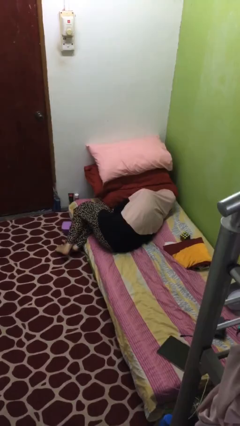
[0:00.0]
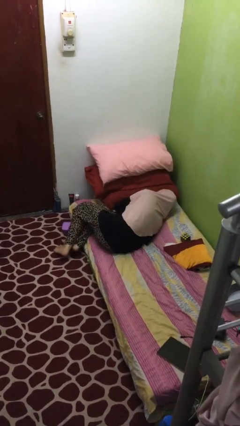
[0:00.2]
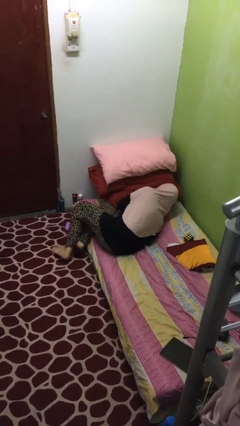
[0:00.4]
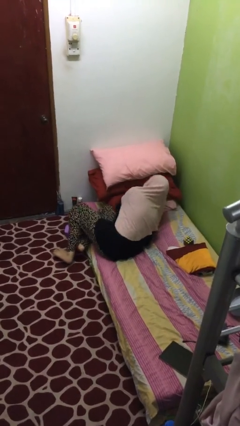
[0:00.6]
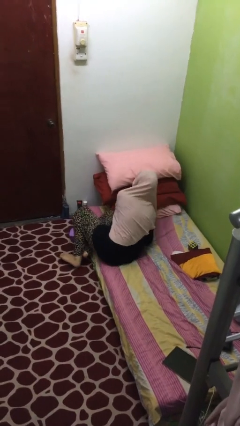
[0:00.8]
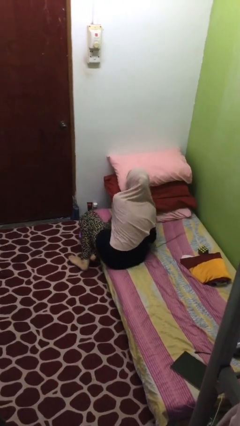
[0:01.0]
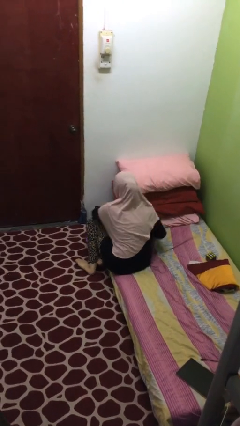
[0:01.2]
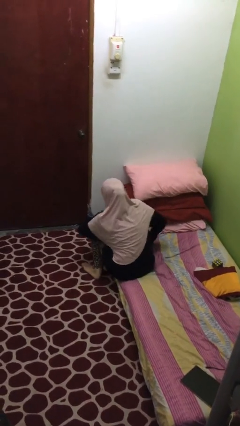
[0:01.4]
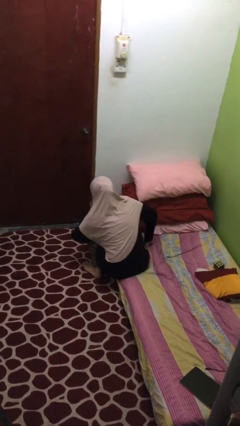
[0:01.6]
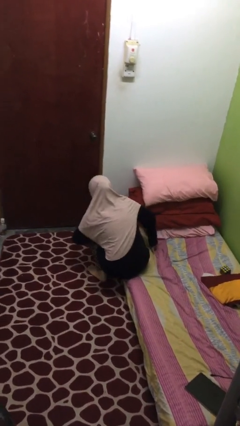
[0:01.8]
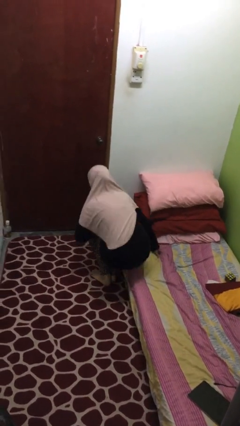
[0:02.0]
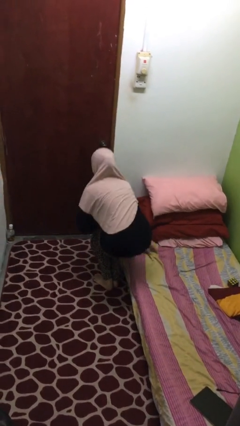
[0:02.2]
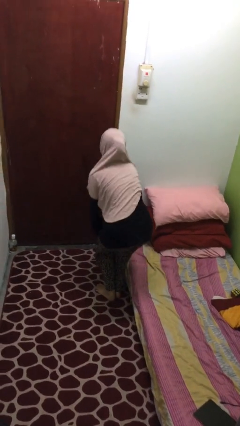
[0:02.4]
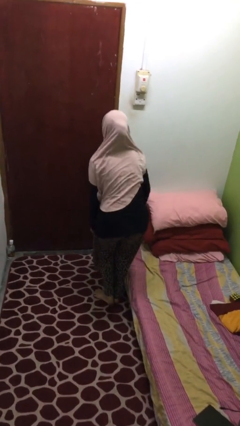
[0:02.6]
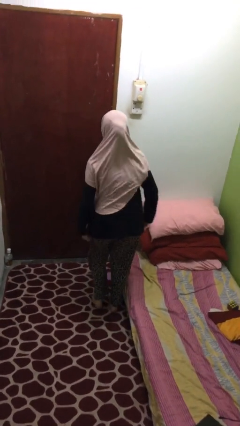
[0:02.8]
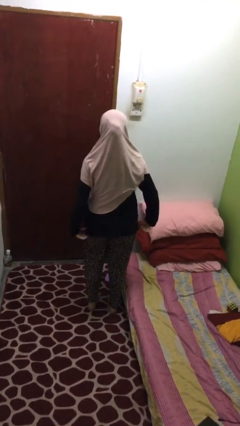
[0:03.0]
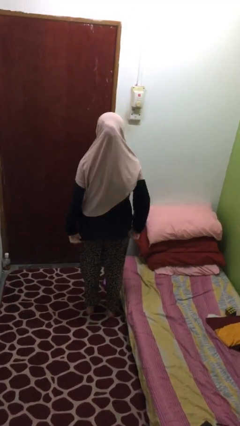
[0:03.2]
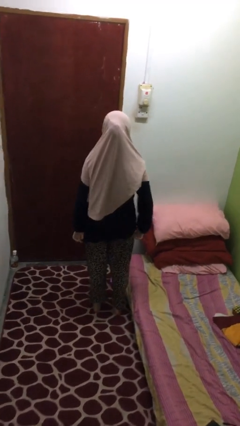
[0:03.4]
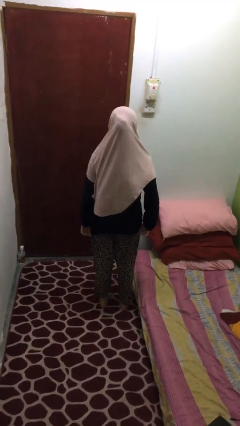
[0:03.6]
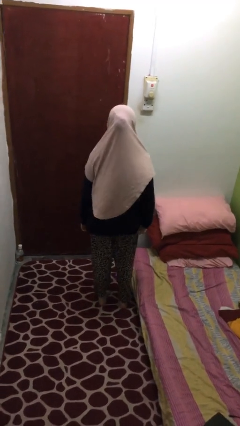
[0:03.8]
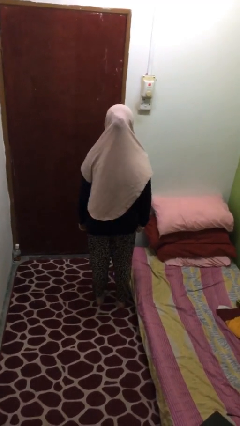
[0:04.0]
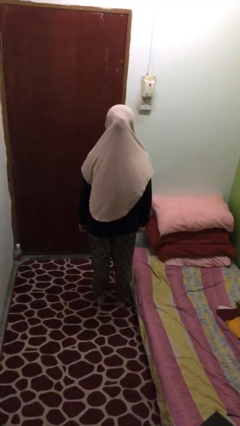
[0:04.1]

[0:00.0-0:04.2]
person stands up

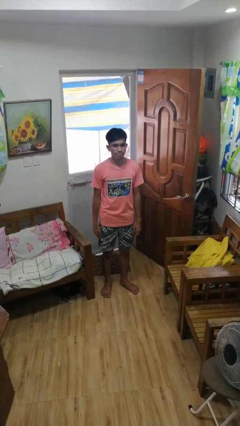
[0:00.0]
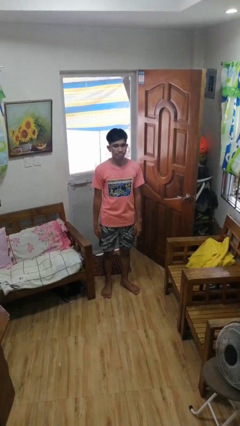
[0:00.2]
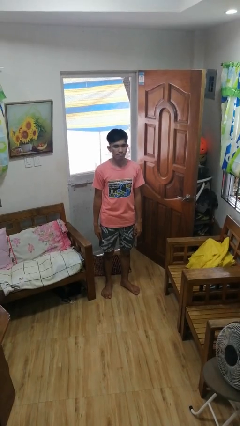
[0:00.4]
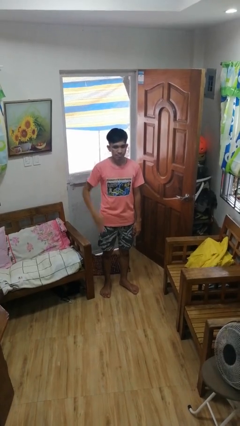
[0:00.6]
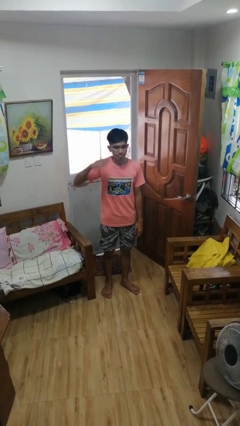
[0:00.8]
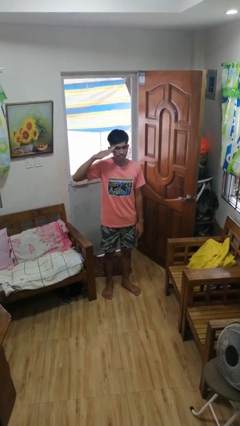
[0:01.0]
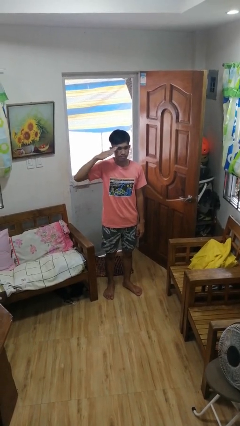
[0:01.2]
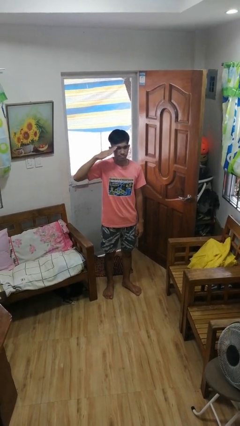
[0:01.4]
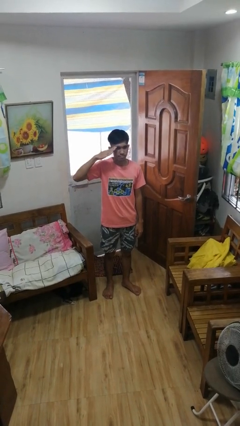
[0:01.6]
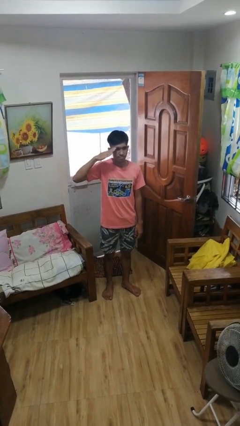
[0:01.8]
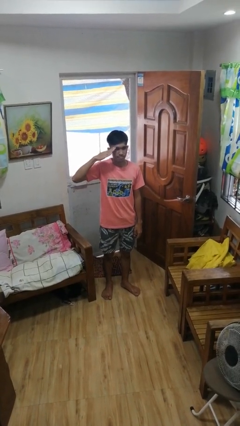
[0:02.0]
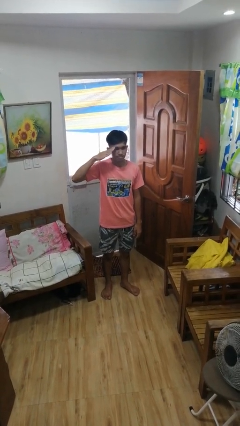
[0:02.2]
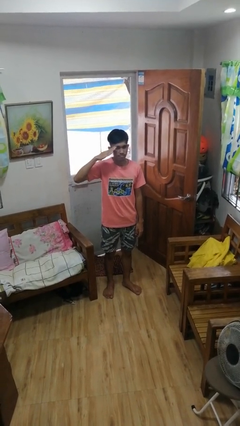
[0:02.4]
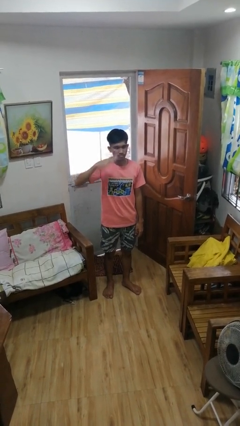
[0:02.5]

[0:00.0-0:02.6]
person salutes

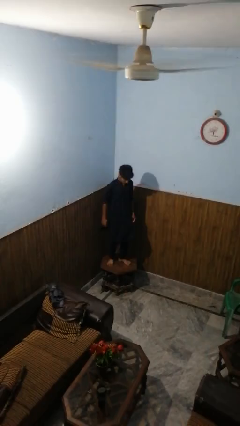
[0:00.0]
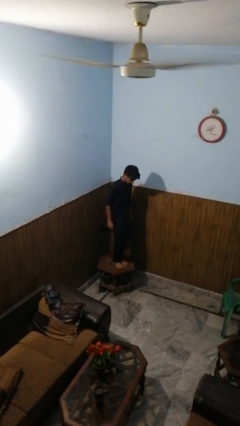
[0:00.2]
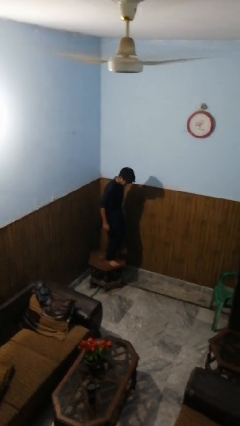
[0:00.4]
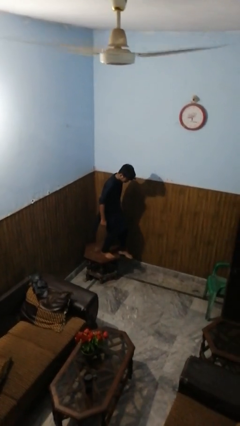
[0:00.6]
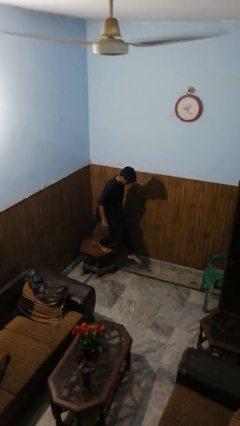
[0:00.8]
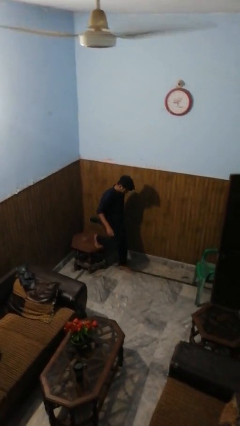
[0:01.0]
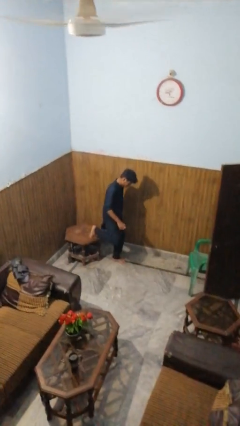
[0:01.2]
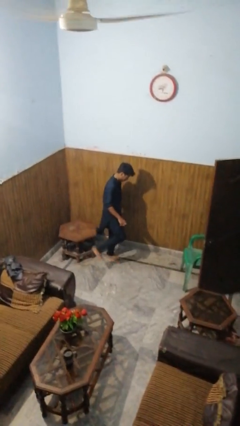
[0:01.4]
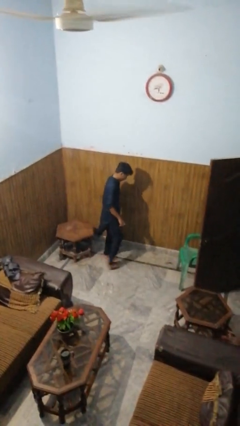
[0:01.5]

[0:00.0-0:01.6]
person climbs off table

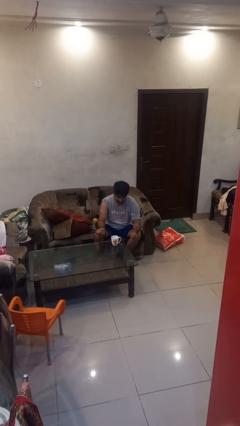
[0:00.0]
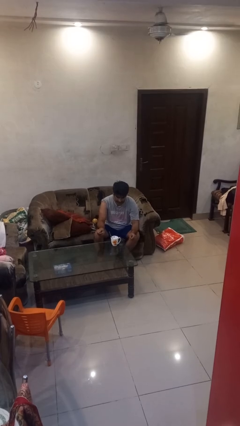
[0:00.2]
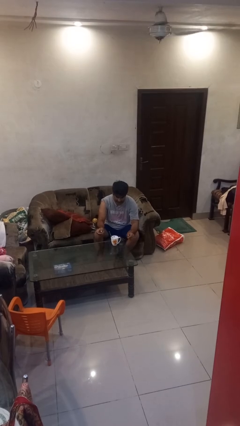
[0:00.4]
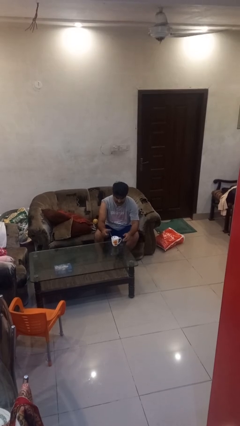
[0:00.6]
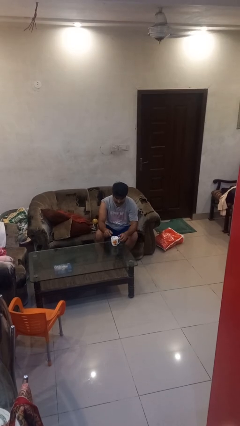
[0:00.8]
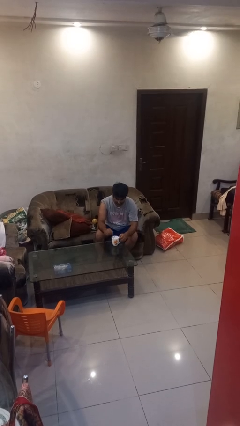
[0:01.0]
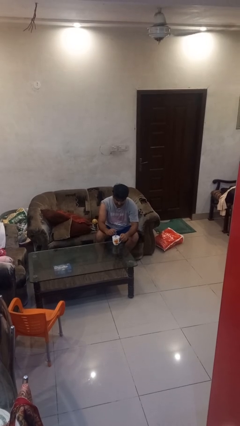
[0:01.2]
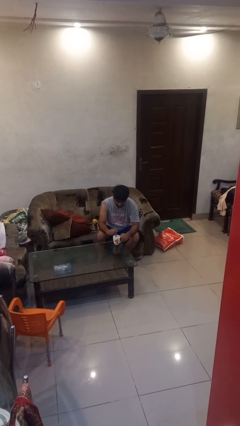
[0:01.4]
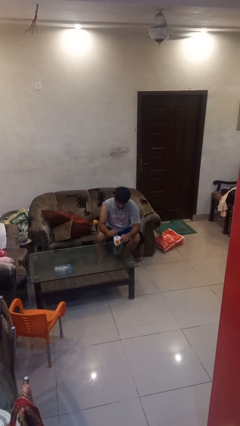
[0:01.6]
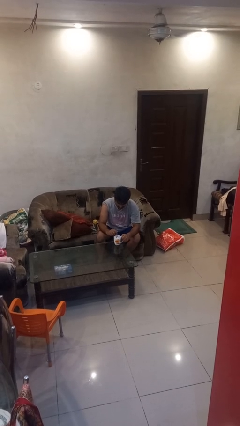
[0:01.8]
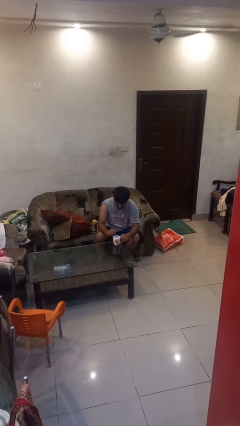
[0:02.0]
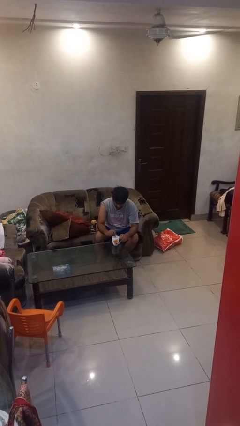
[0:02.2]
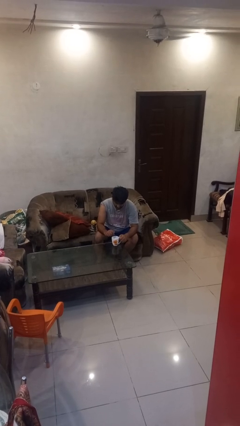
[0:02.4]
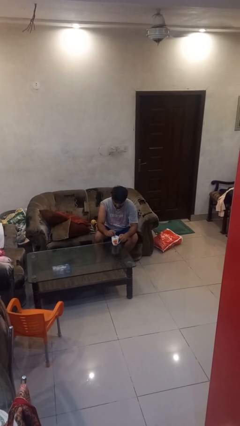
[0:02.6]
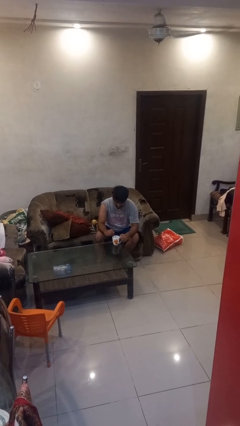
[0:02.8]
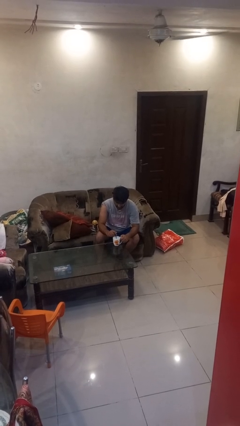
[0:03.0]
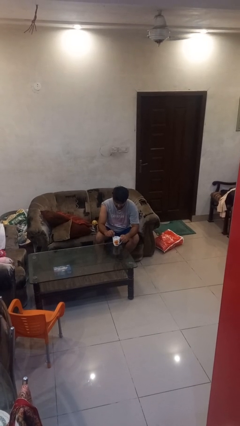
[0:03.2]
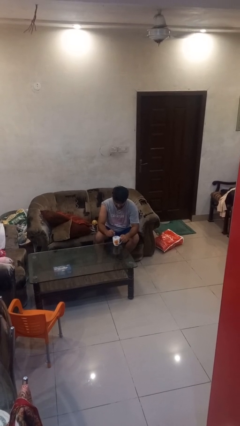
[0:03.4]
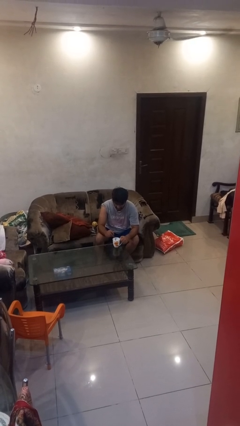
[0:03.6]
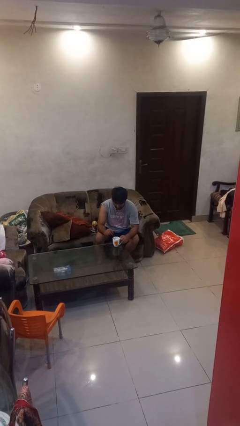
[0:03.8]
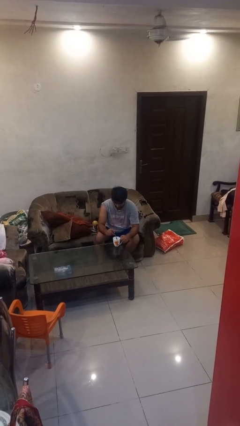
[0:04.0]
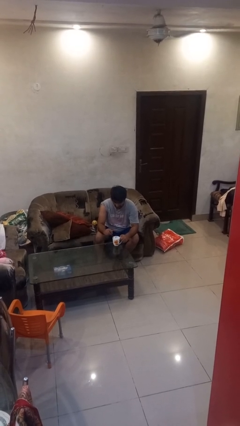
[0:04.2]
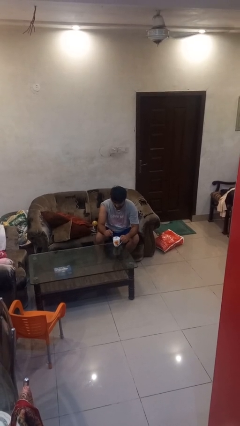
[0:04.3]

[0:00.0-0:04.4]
person stirs mug

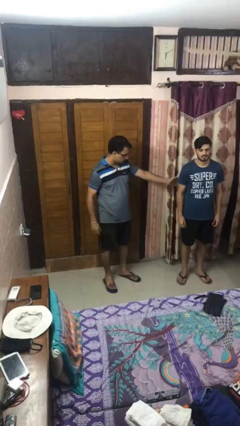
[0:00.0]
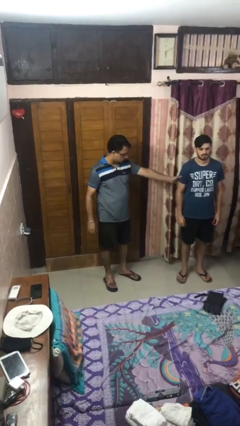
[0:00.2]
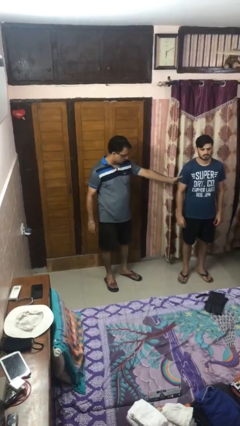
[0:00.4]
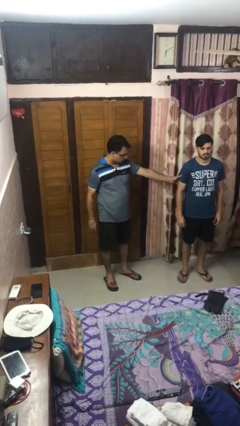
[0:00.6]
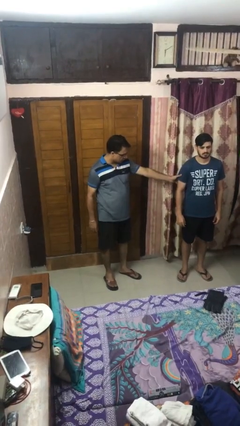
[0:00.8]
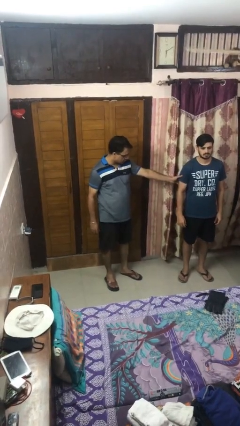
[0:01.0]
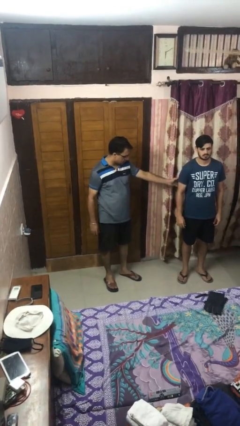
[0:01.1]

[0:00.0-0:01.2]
person grabs person by bicep

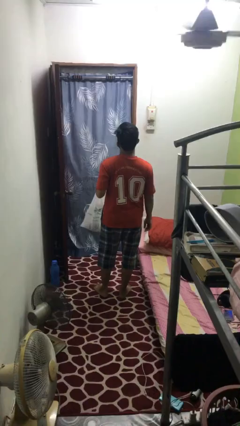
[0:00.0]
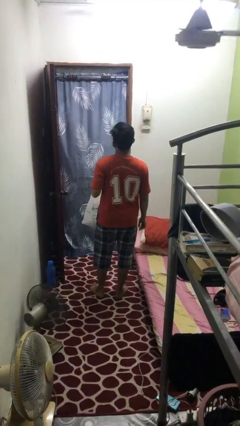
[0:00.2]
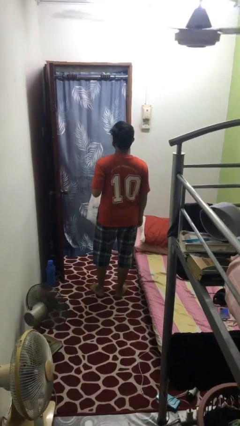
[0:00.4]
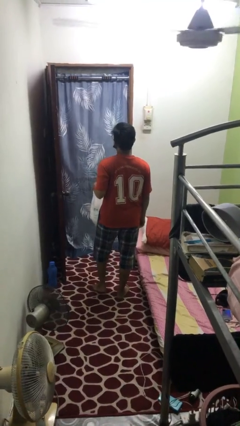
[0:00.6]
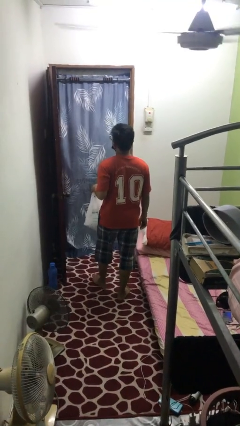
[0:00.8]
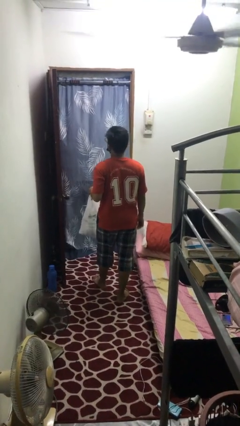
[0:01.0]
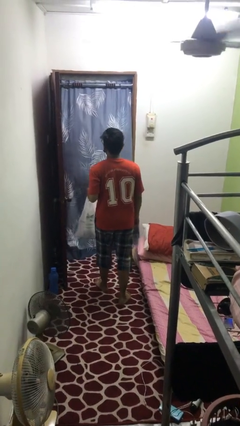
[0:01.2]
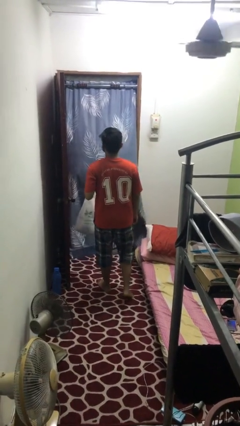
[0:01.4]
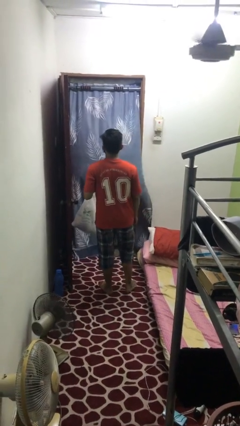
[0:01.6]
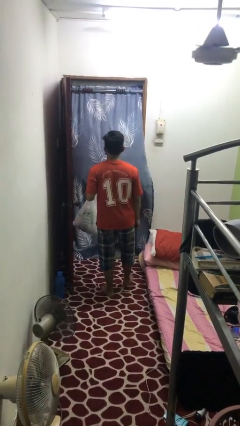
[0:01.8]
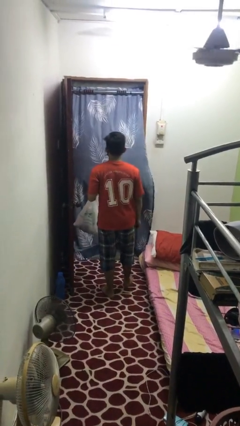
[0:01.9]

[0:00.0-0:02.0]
person carries groceries

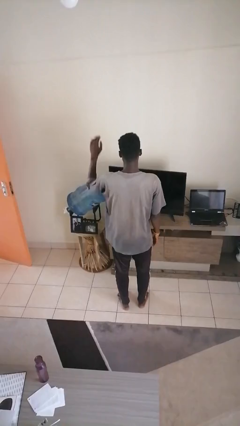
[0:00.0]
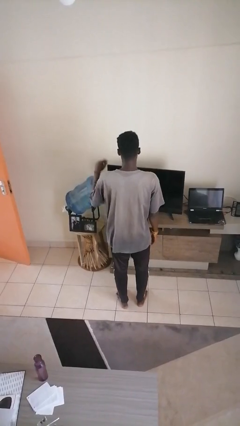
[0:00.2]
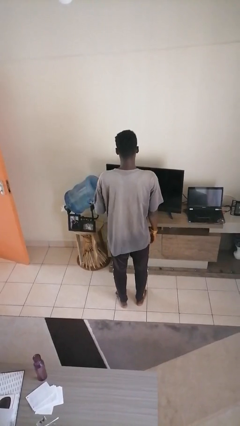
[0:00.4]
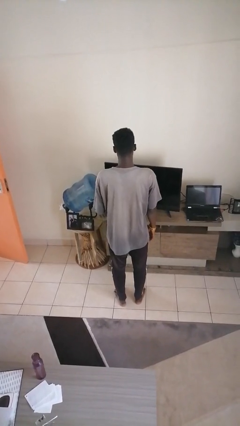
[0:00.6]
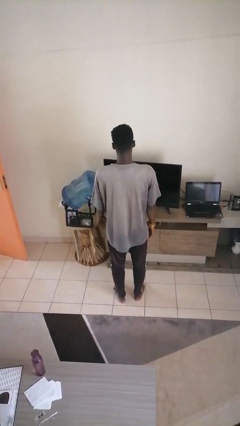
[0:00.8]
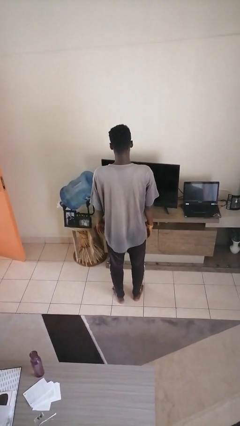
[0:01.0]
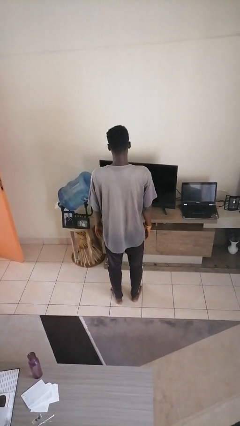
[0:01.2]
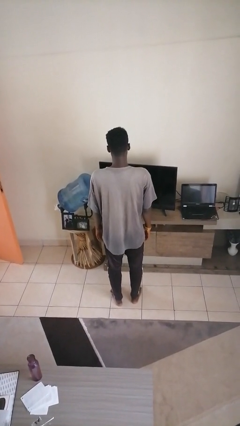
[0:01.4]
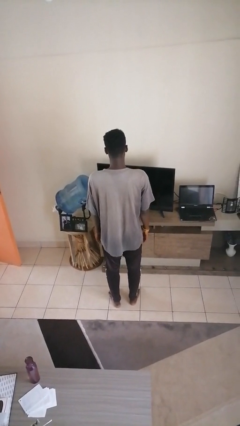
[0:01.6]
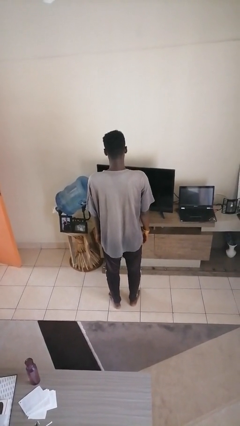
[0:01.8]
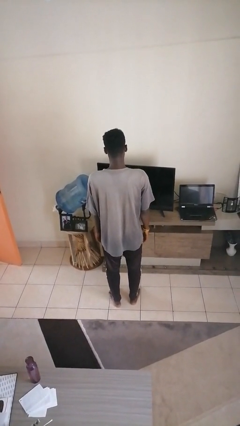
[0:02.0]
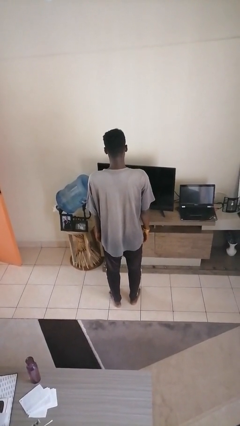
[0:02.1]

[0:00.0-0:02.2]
person gestures lower hand
